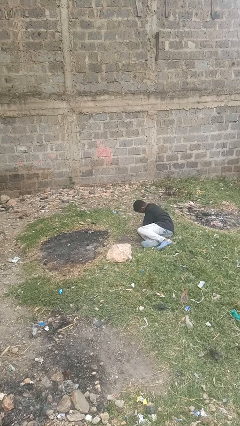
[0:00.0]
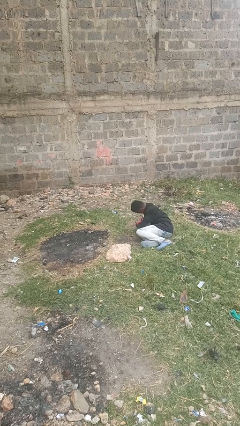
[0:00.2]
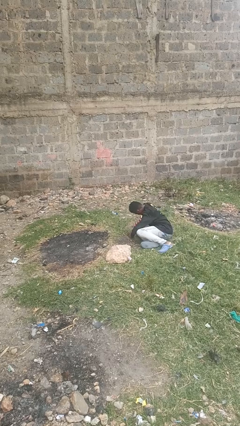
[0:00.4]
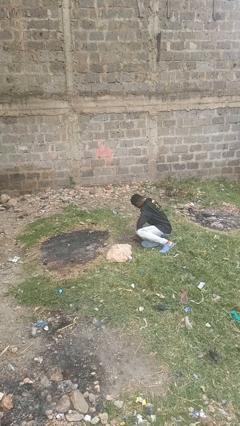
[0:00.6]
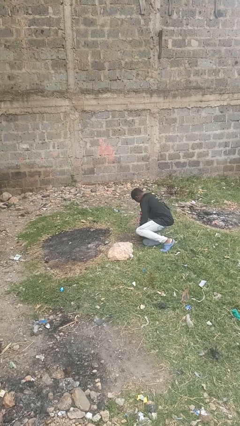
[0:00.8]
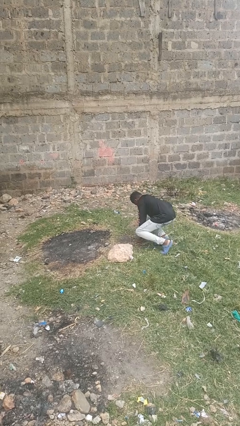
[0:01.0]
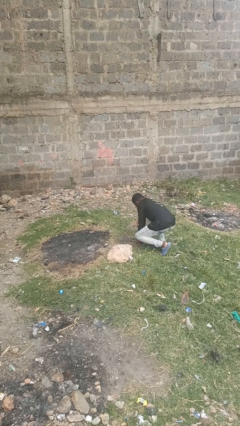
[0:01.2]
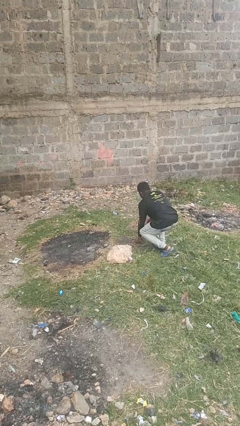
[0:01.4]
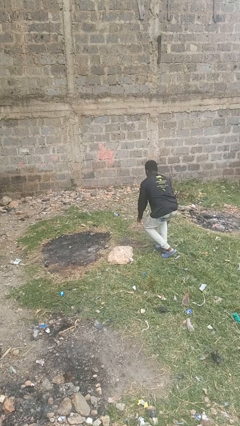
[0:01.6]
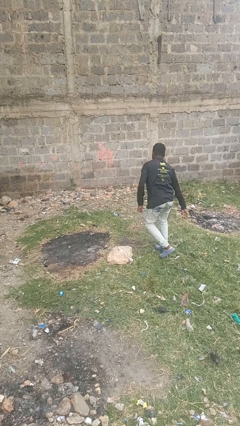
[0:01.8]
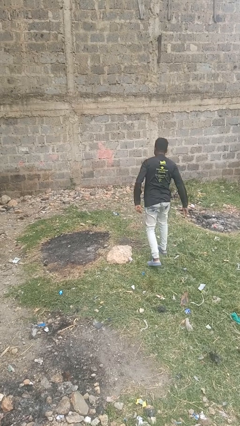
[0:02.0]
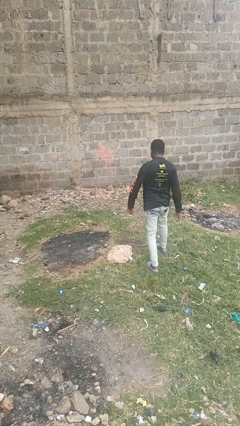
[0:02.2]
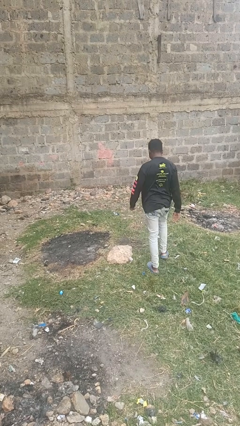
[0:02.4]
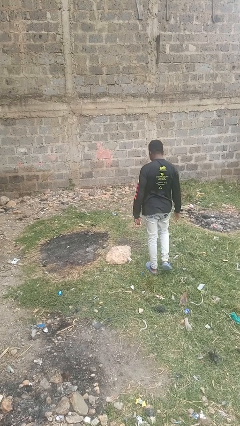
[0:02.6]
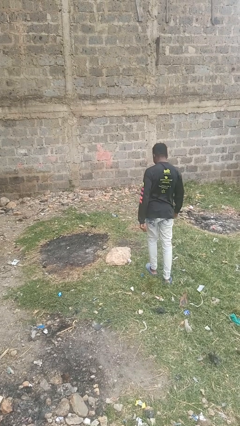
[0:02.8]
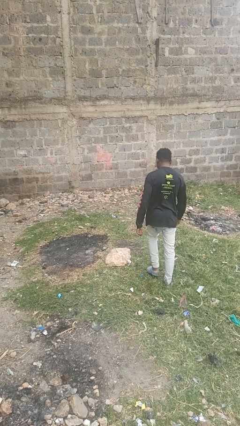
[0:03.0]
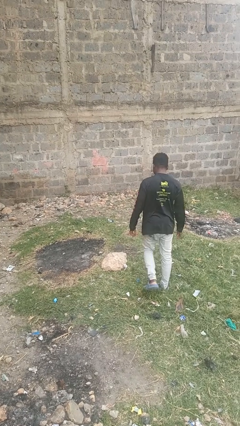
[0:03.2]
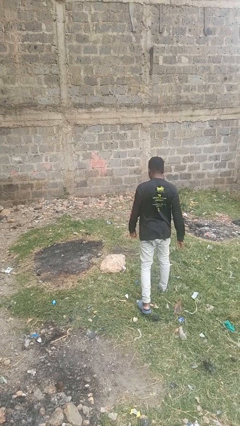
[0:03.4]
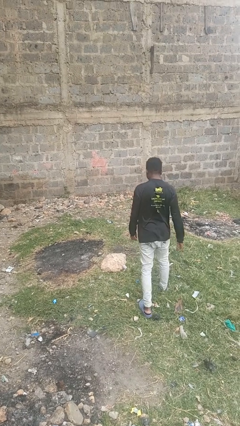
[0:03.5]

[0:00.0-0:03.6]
person stands up from floor

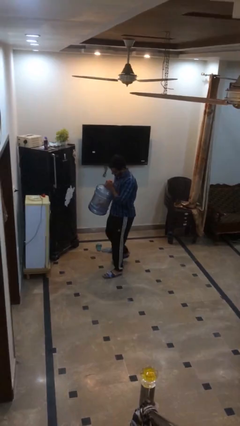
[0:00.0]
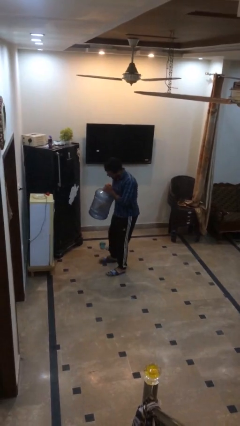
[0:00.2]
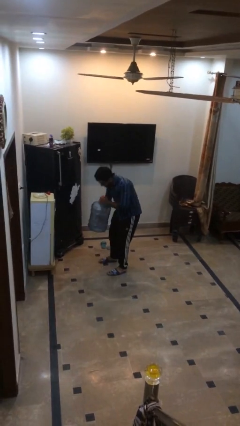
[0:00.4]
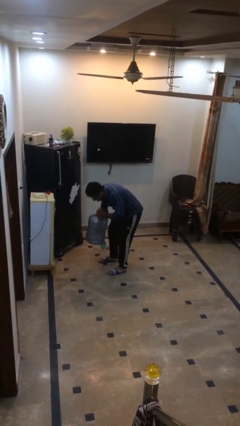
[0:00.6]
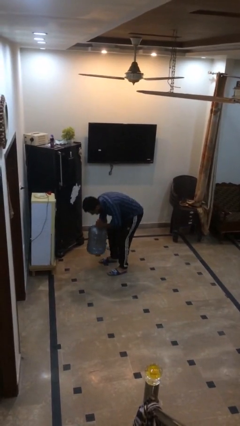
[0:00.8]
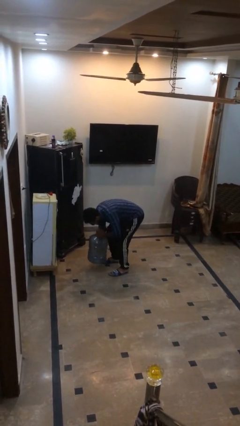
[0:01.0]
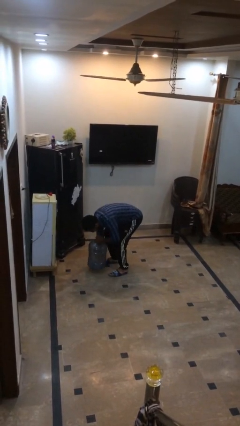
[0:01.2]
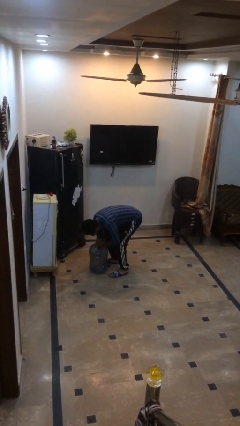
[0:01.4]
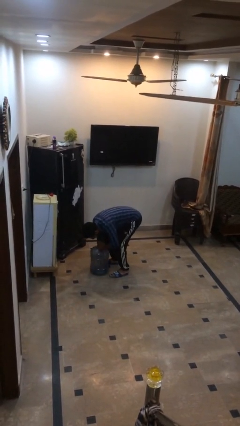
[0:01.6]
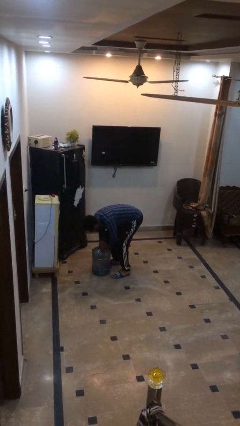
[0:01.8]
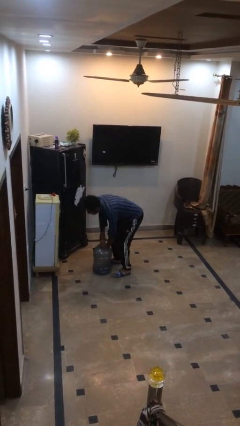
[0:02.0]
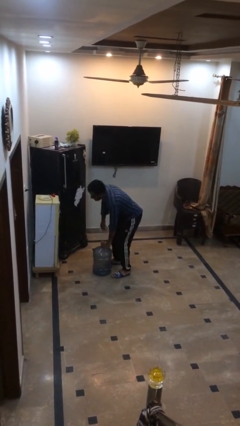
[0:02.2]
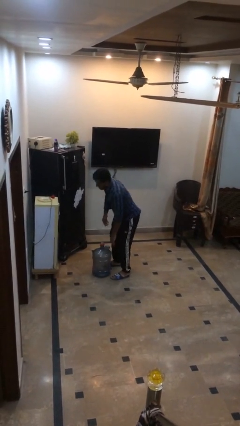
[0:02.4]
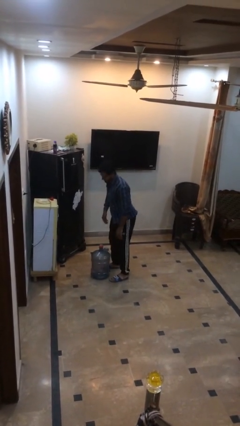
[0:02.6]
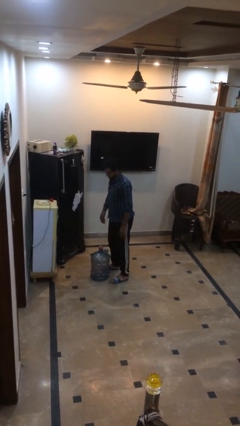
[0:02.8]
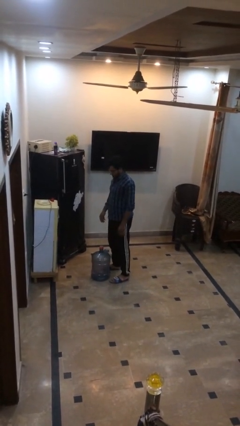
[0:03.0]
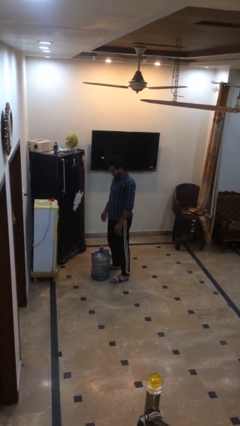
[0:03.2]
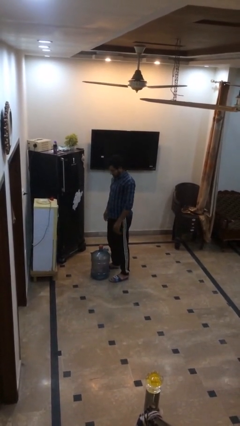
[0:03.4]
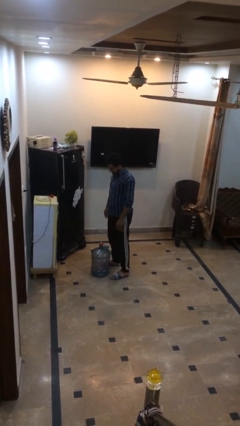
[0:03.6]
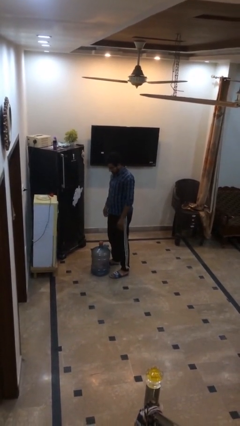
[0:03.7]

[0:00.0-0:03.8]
person puts down object on floor

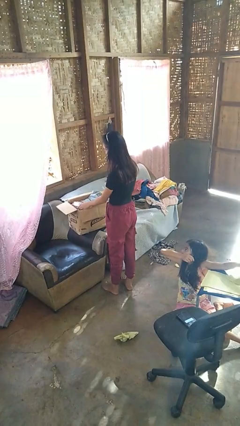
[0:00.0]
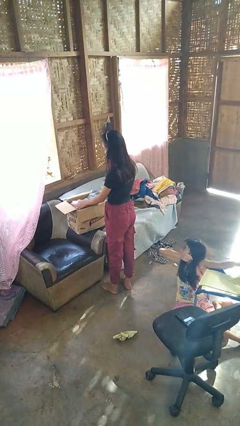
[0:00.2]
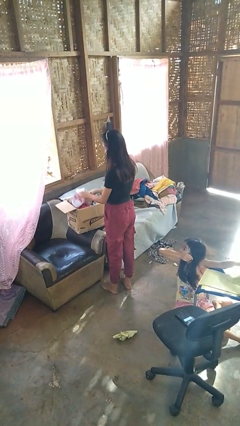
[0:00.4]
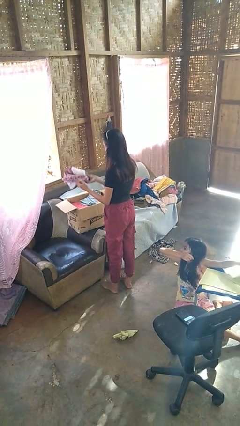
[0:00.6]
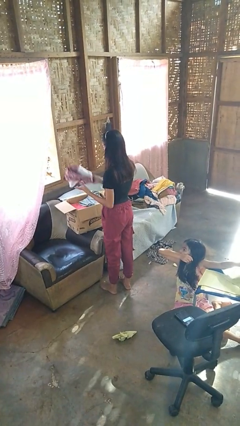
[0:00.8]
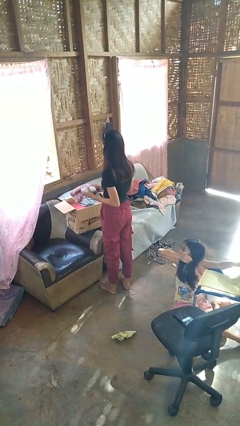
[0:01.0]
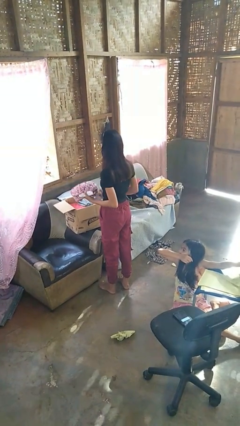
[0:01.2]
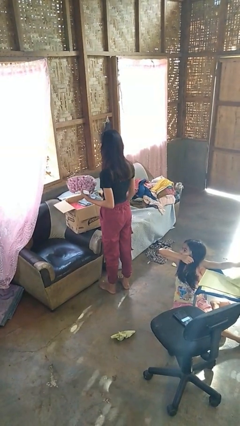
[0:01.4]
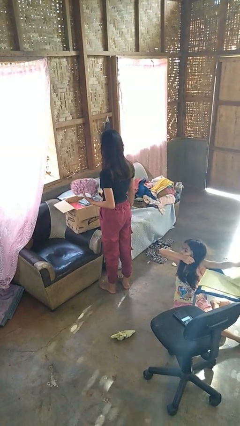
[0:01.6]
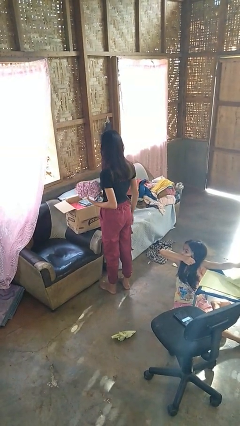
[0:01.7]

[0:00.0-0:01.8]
person takes object from box

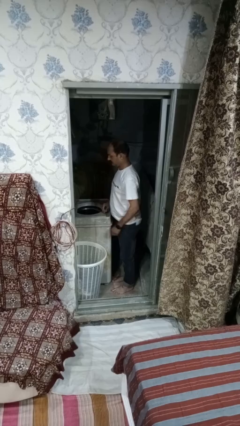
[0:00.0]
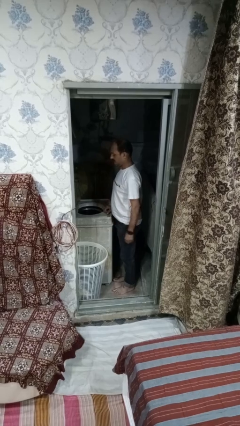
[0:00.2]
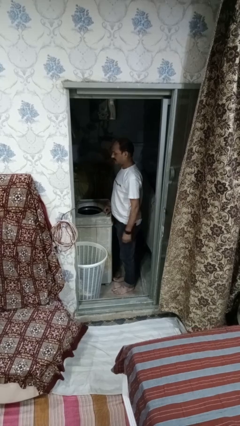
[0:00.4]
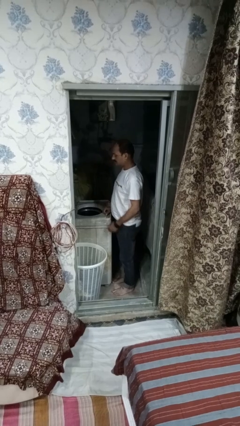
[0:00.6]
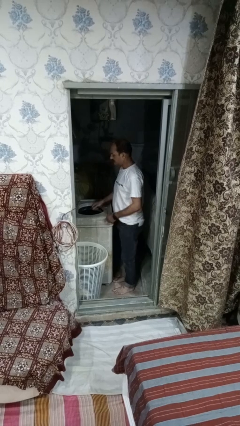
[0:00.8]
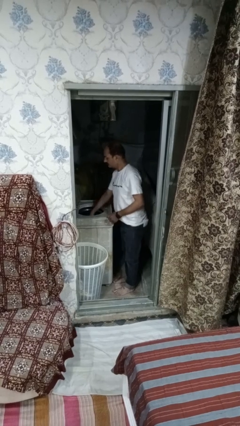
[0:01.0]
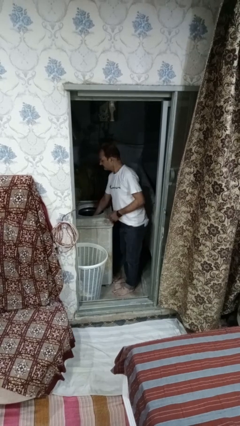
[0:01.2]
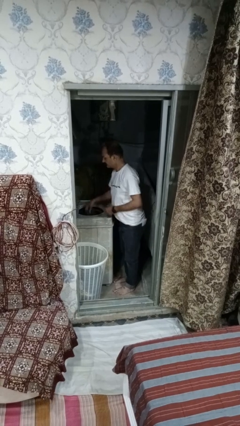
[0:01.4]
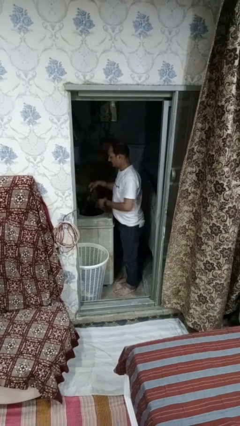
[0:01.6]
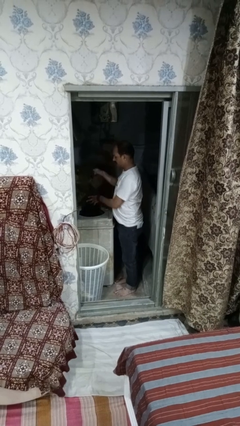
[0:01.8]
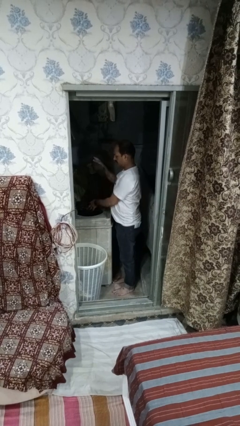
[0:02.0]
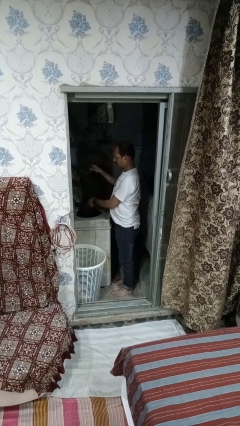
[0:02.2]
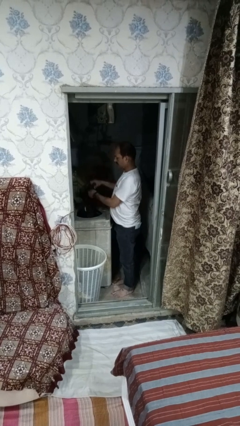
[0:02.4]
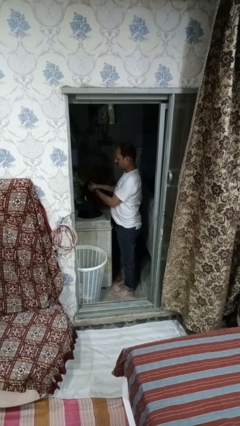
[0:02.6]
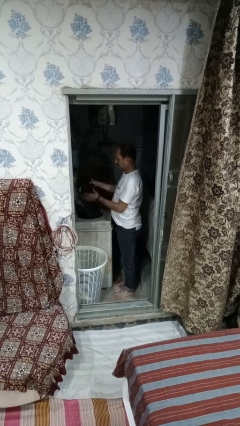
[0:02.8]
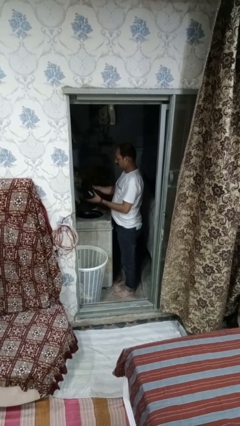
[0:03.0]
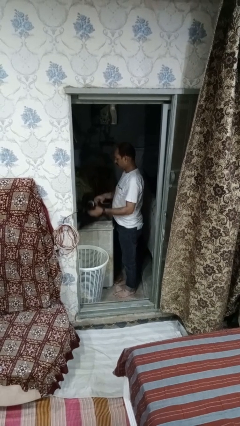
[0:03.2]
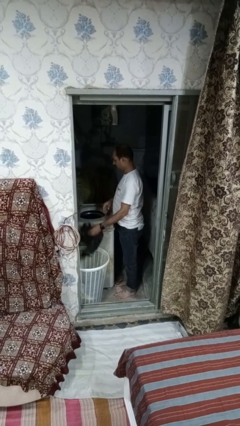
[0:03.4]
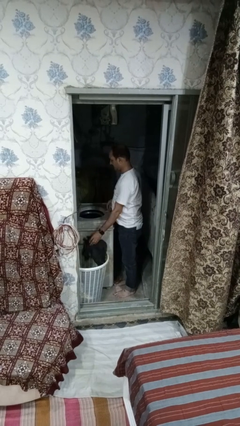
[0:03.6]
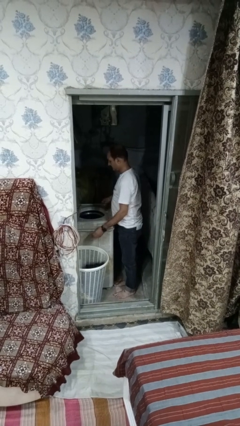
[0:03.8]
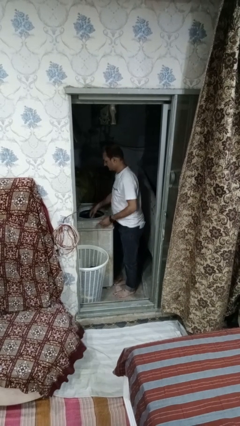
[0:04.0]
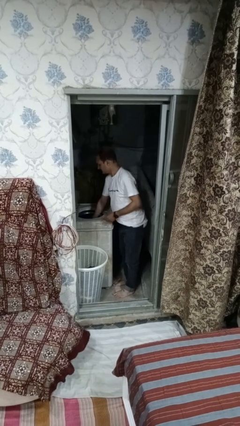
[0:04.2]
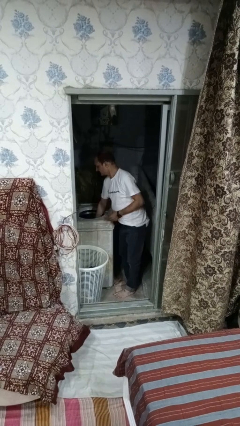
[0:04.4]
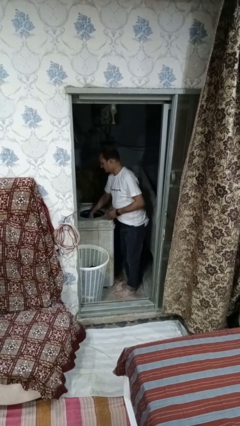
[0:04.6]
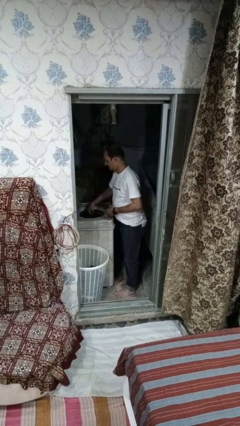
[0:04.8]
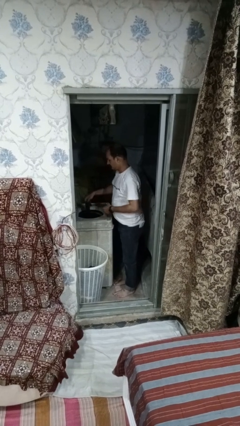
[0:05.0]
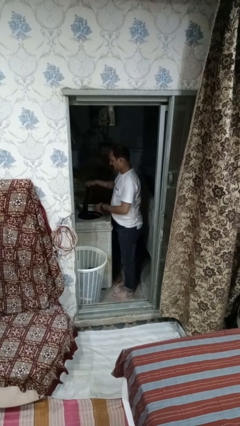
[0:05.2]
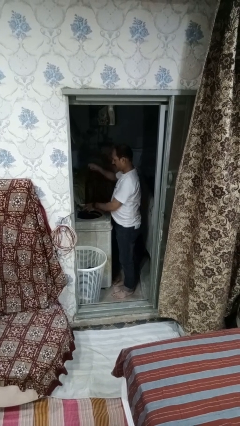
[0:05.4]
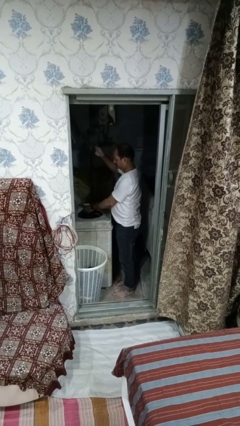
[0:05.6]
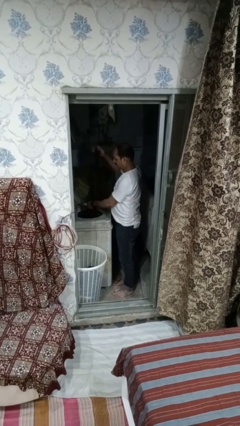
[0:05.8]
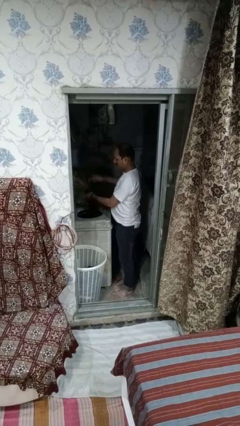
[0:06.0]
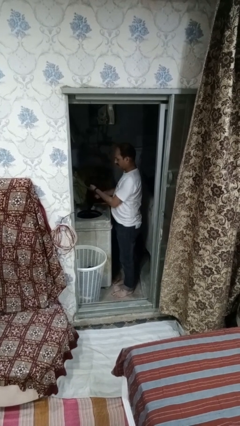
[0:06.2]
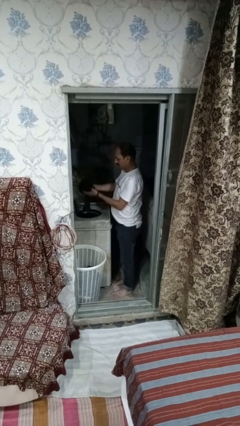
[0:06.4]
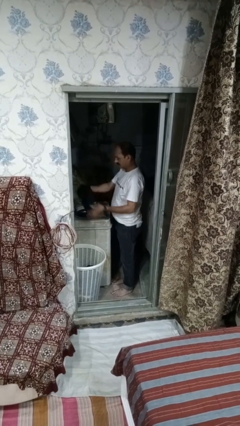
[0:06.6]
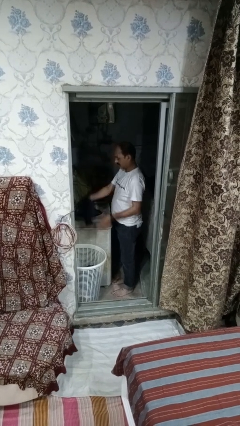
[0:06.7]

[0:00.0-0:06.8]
person unloads dryer

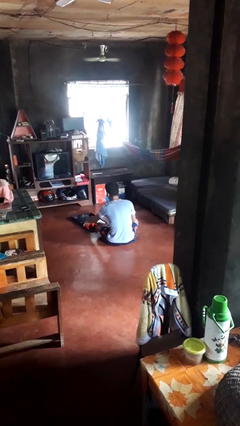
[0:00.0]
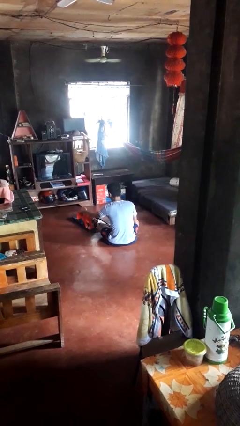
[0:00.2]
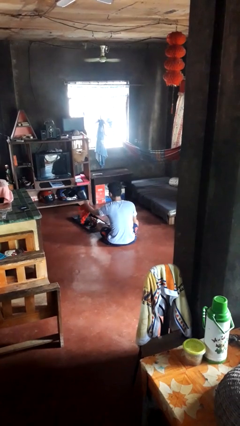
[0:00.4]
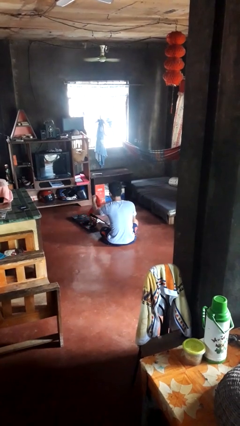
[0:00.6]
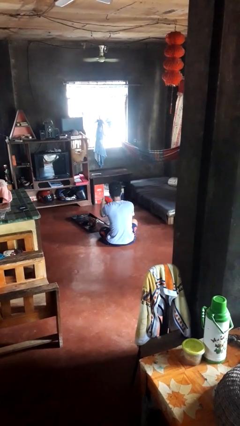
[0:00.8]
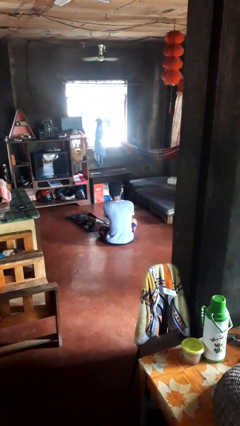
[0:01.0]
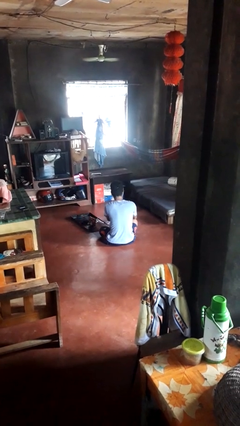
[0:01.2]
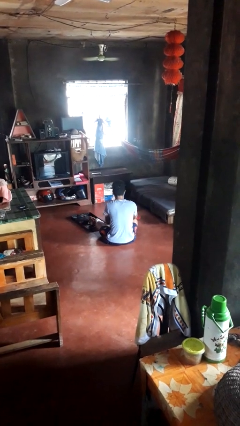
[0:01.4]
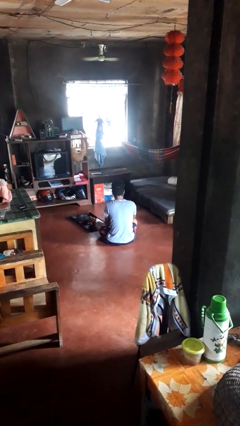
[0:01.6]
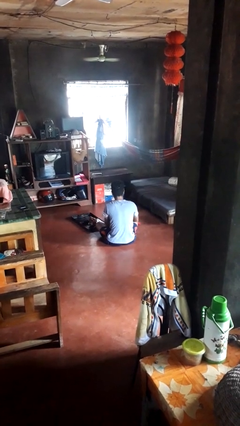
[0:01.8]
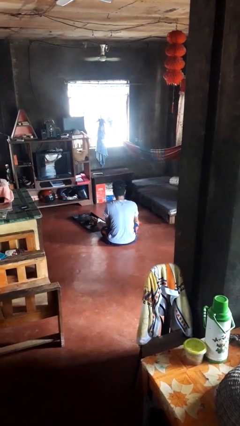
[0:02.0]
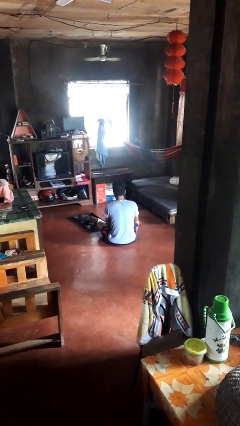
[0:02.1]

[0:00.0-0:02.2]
person unloads clothes from suitcase
